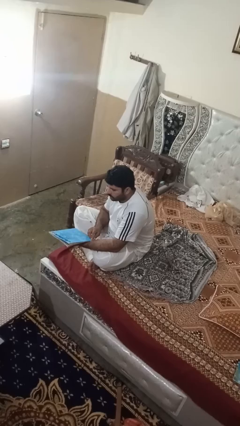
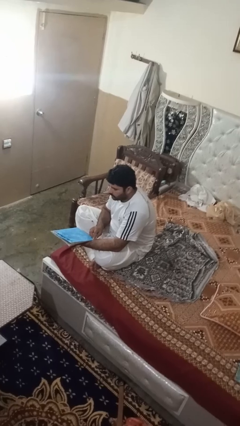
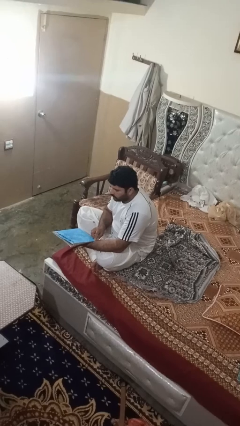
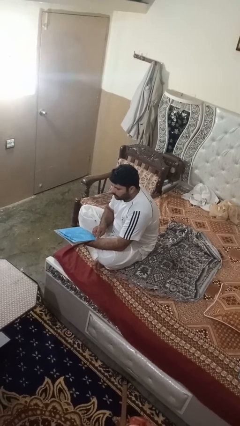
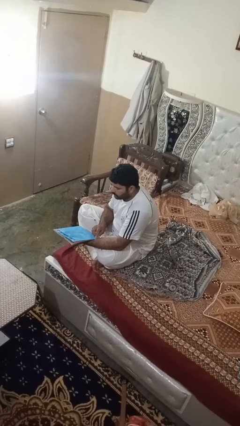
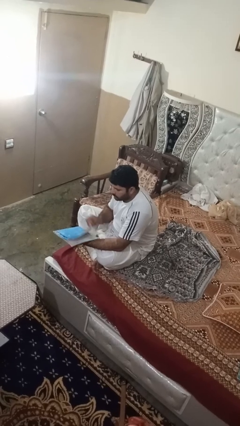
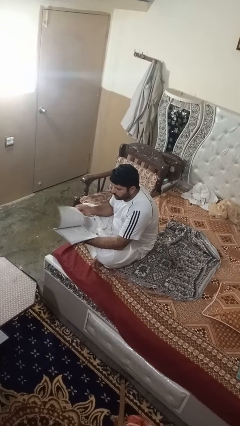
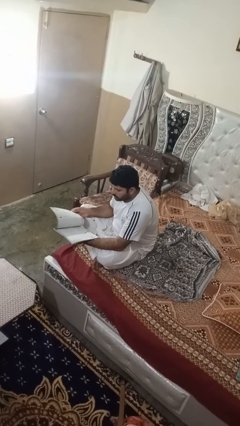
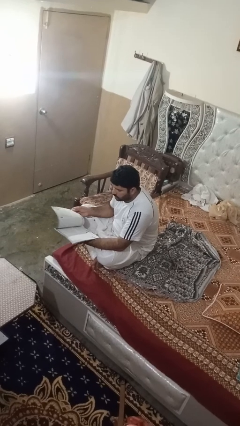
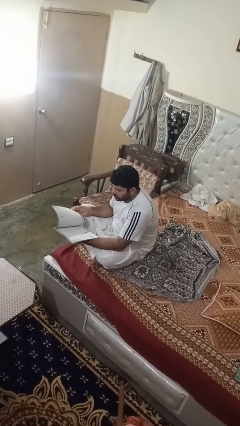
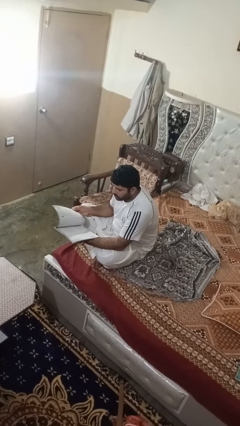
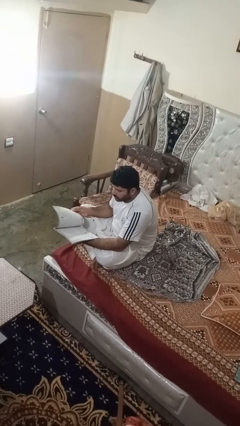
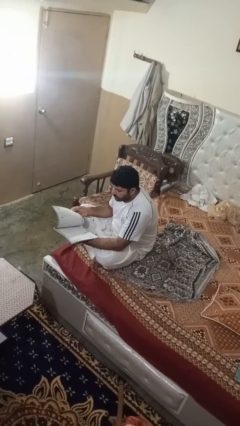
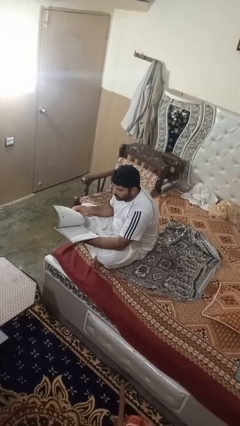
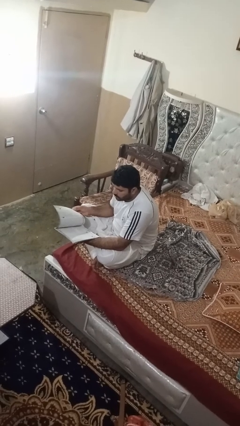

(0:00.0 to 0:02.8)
person reads magazine

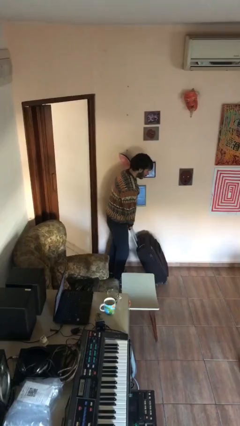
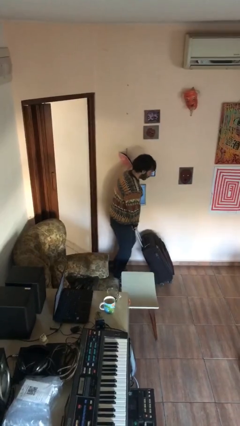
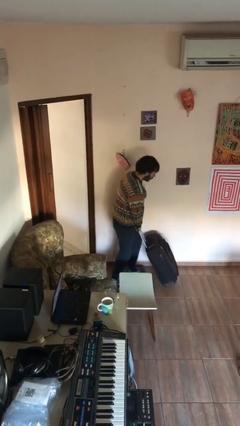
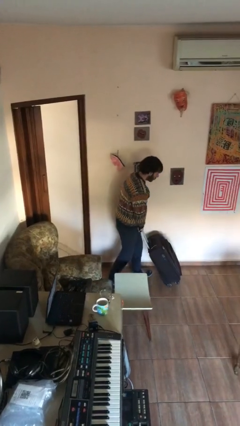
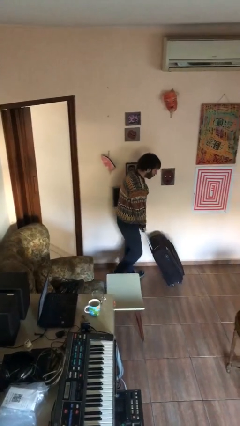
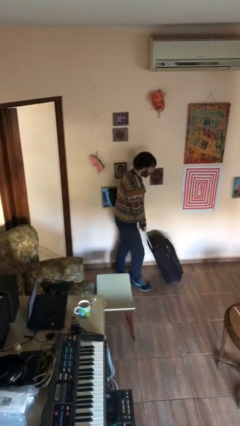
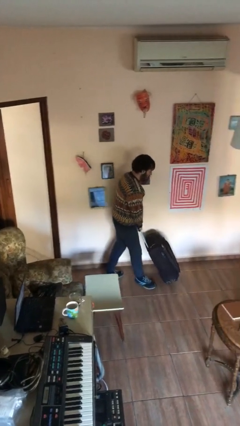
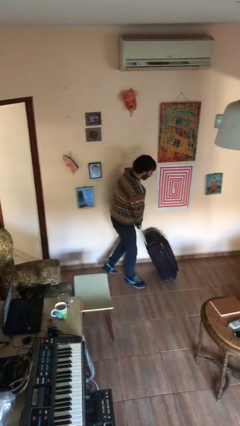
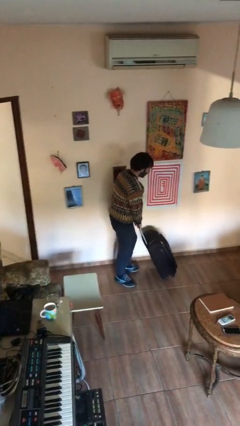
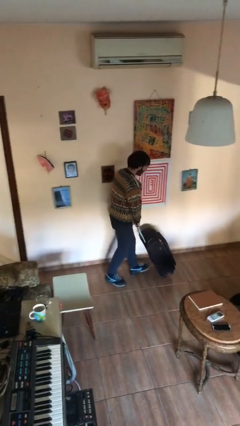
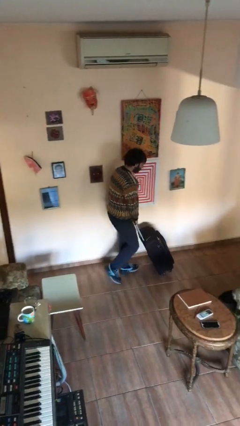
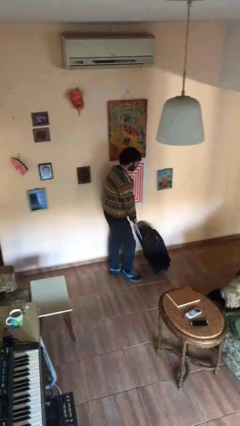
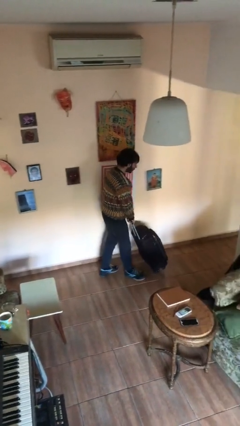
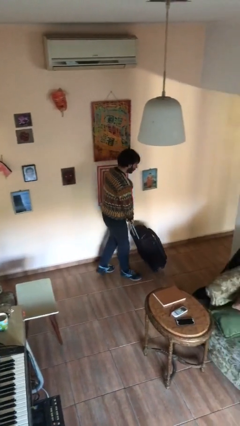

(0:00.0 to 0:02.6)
person pushes wheeled cart

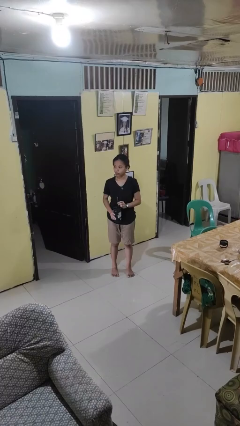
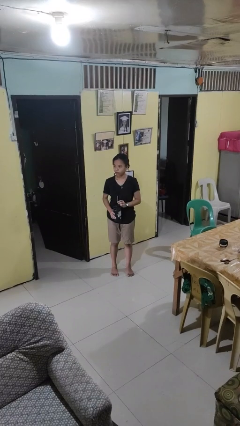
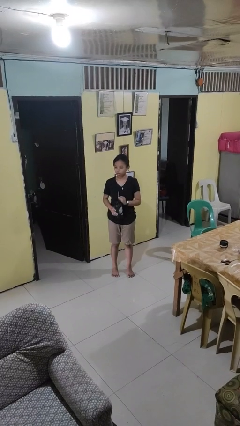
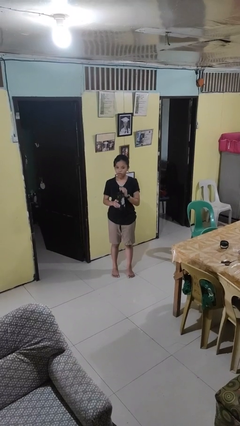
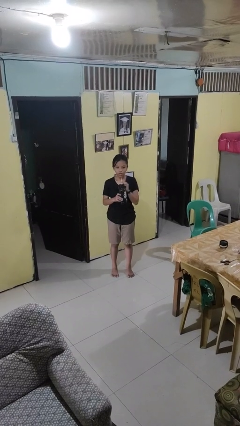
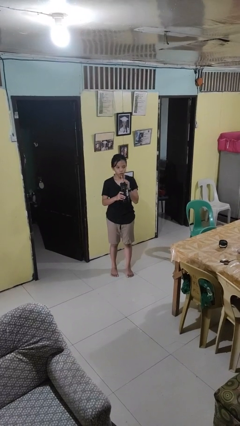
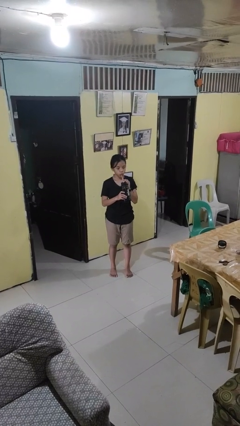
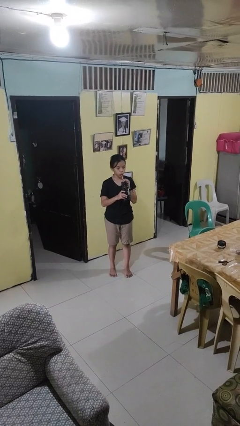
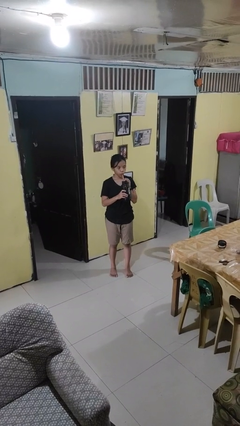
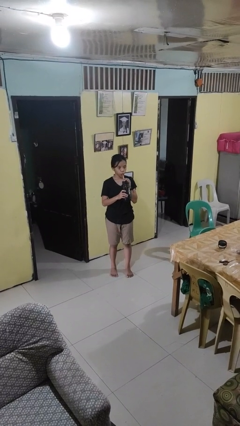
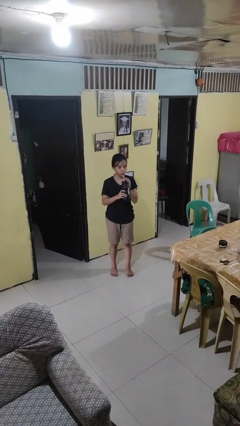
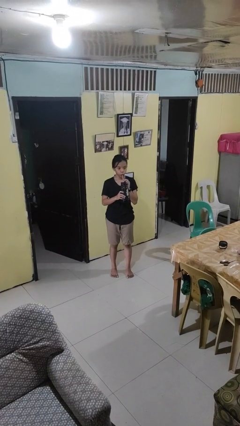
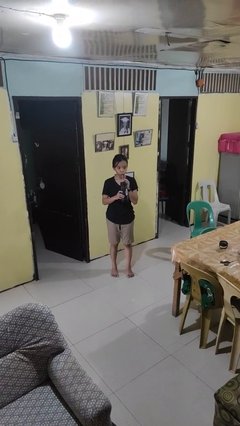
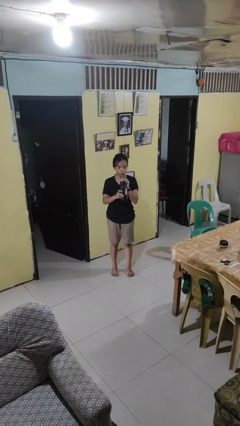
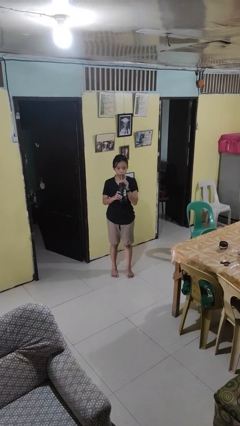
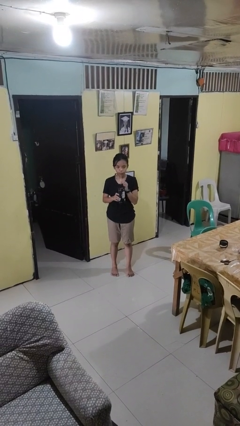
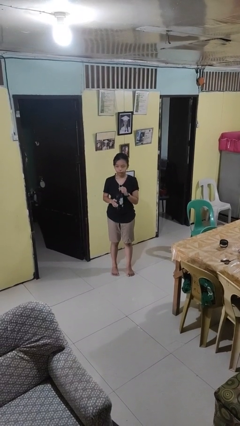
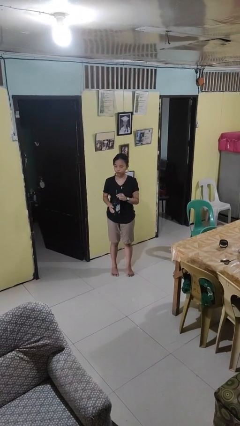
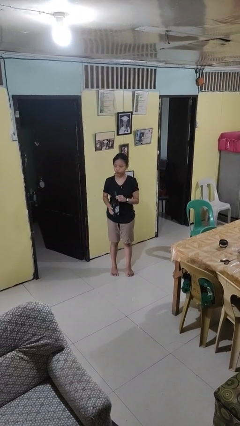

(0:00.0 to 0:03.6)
person drinks from straw

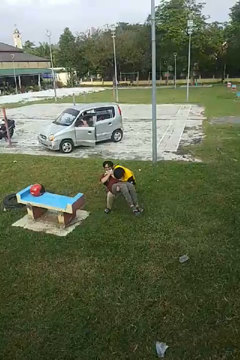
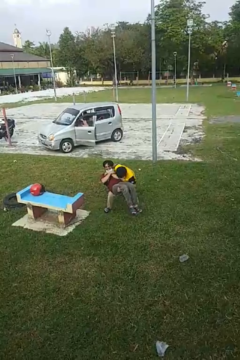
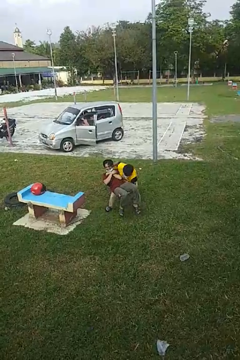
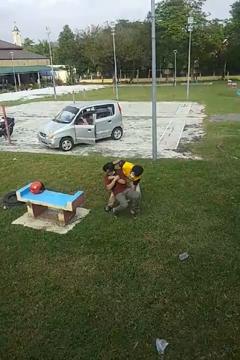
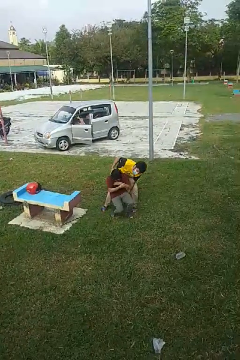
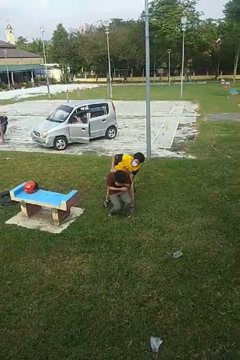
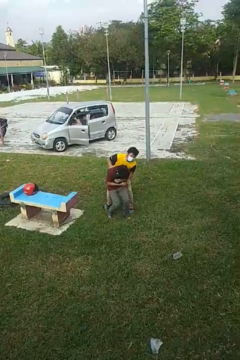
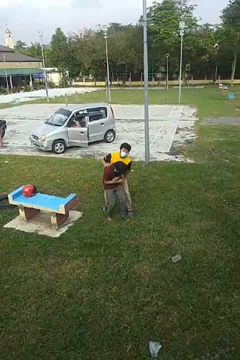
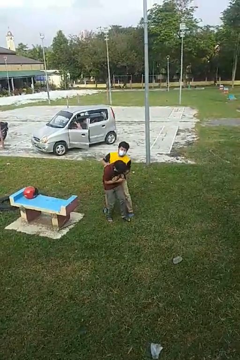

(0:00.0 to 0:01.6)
person puts down person

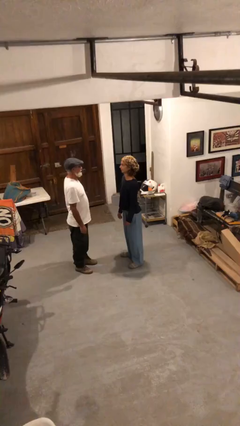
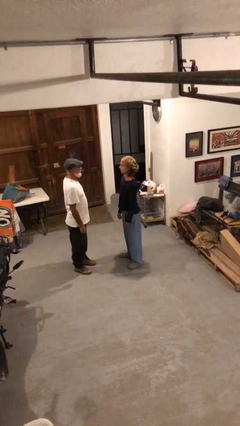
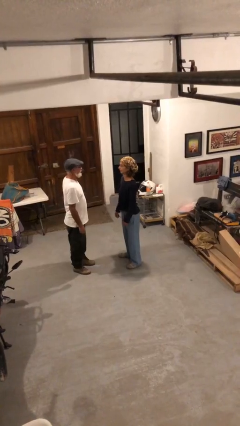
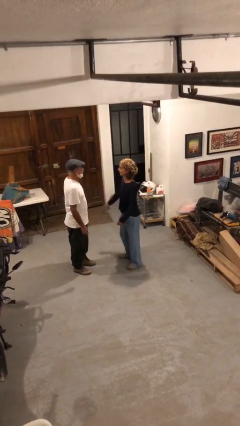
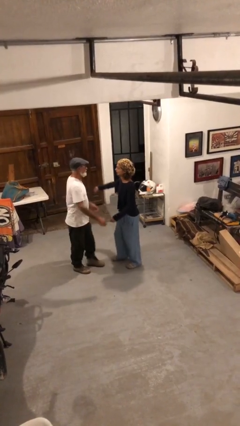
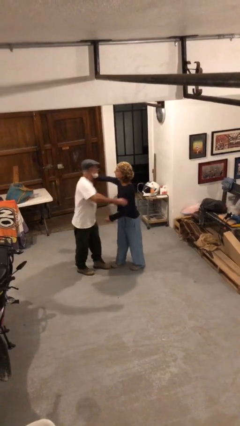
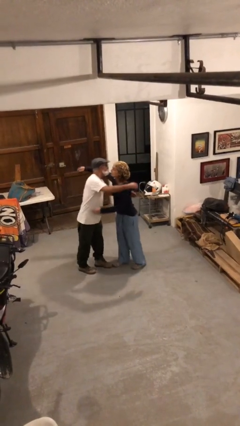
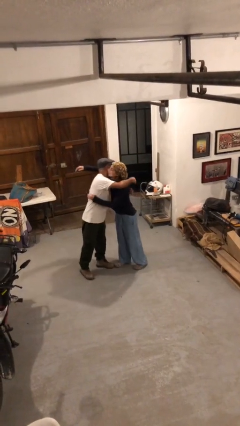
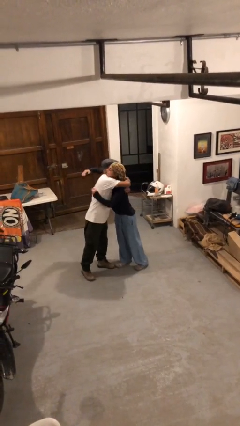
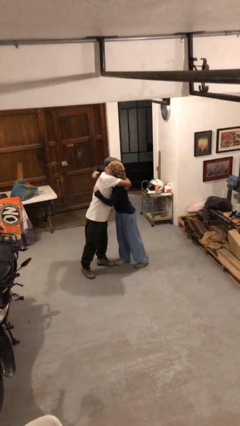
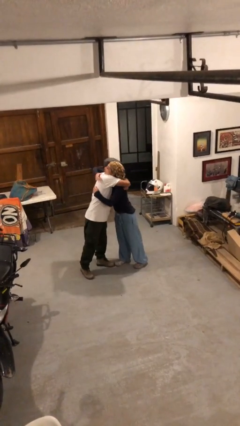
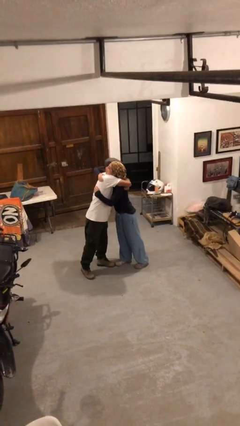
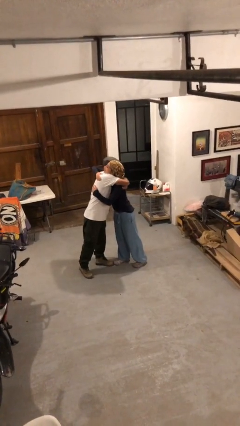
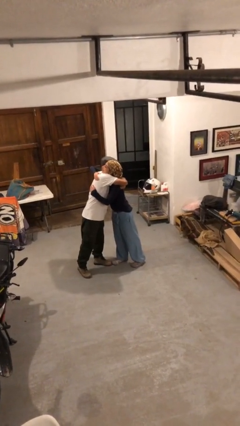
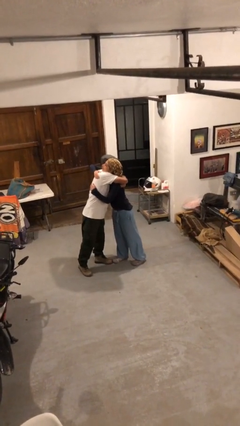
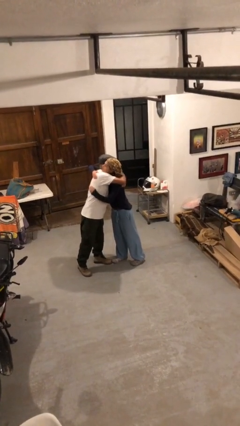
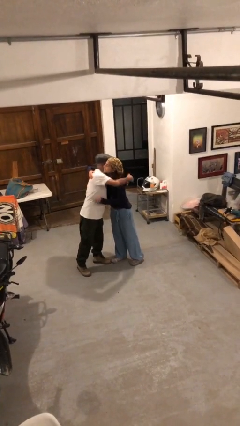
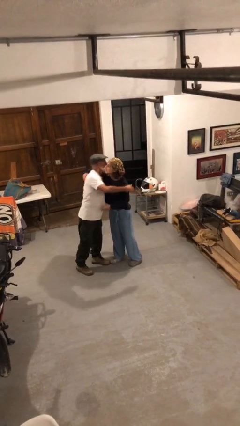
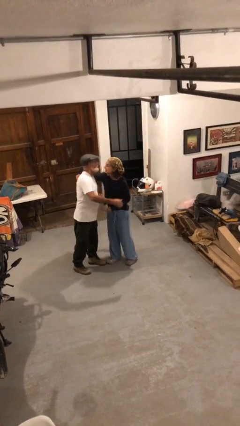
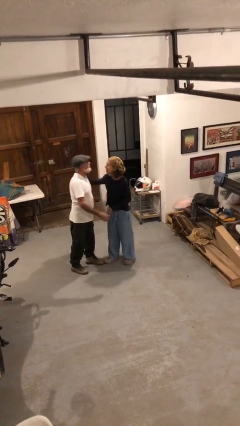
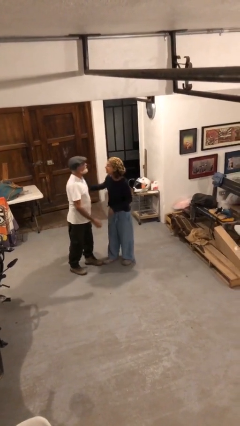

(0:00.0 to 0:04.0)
person embraces person

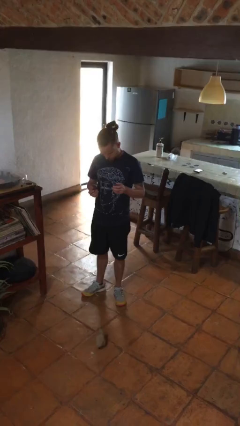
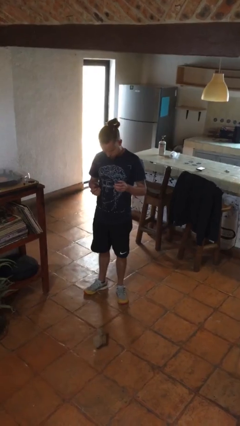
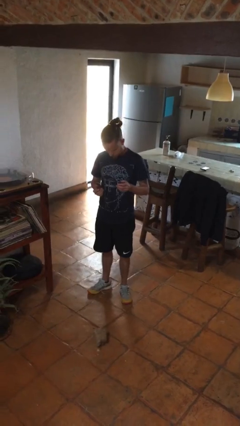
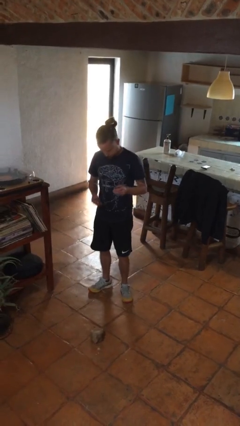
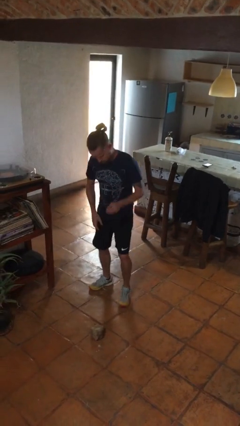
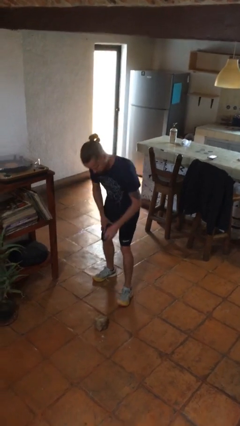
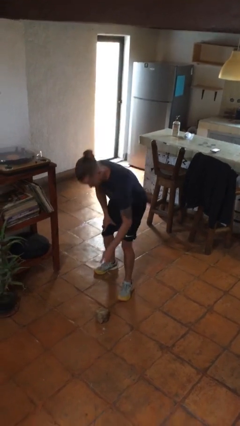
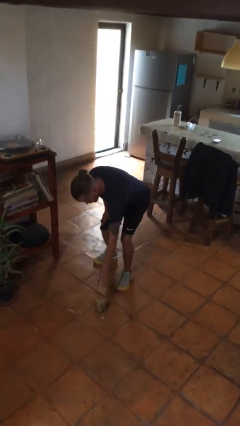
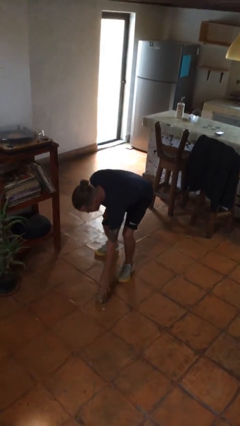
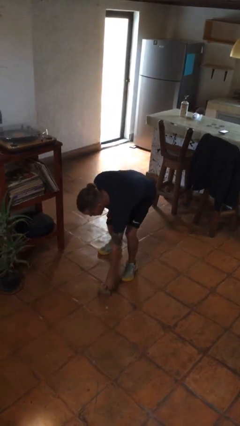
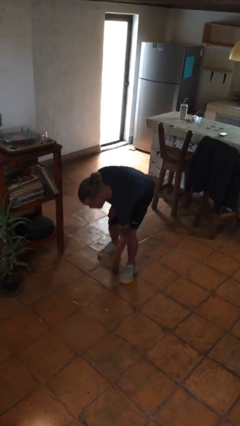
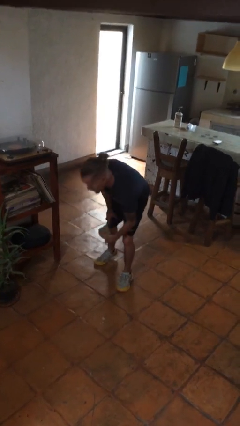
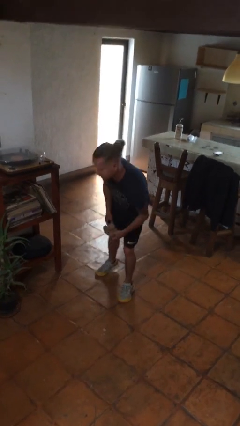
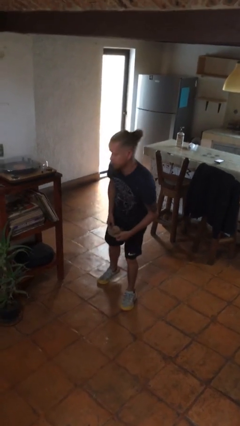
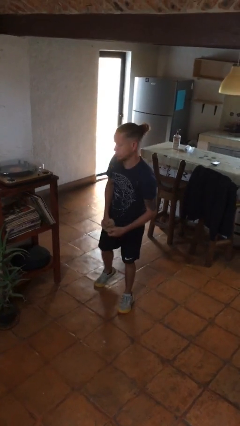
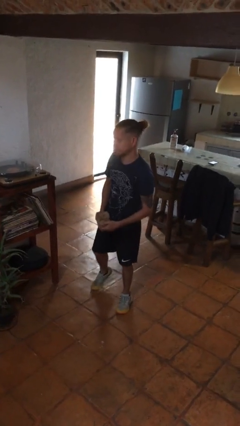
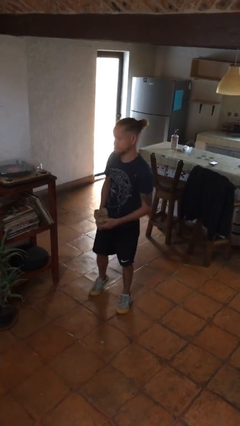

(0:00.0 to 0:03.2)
person picks up object from floor
